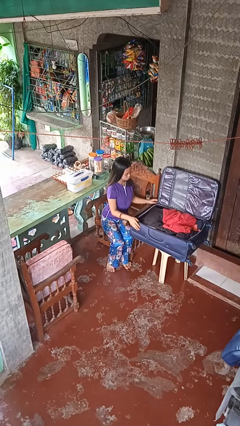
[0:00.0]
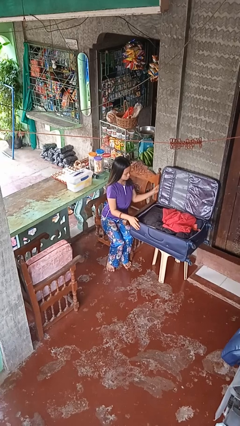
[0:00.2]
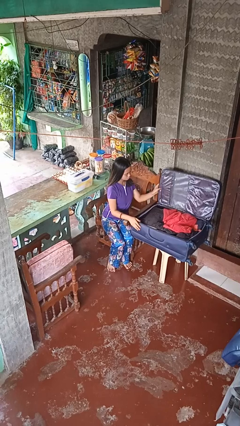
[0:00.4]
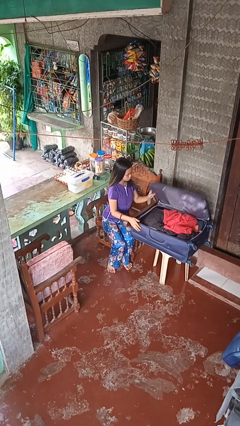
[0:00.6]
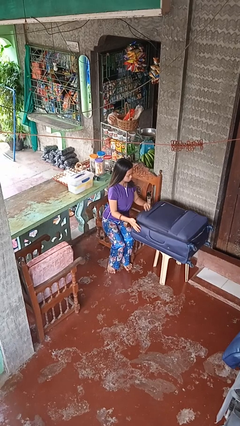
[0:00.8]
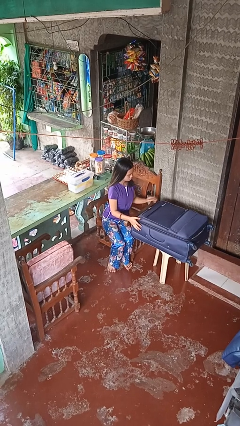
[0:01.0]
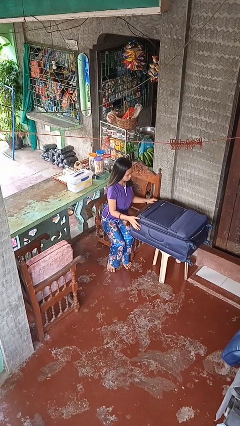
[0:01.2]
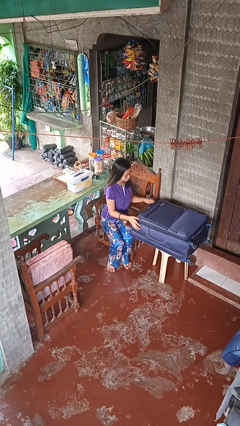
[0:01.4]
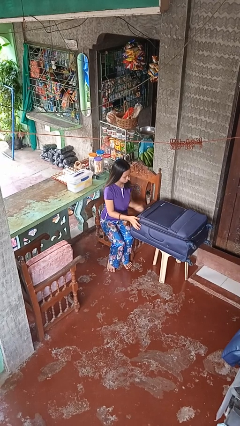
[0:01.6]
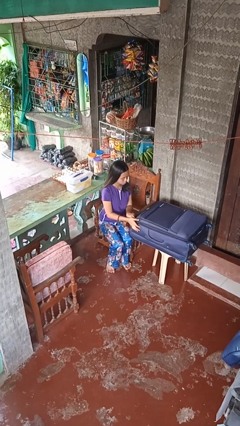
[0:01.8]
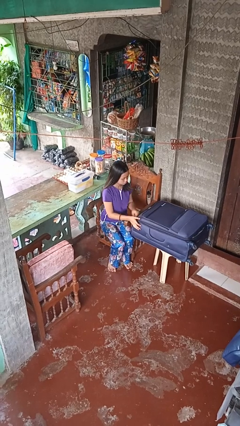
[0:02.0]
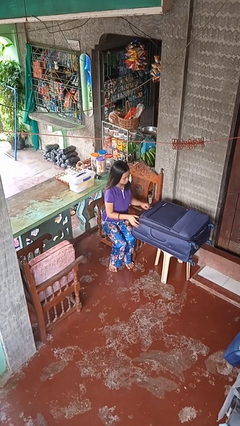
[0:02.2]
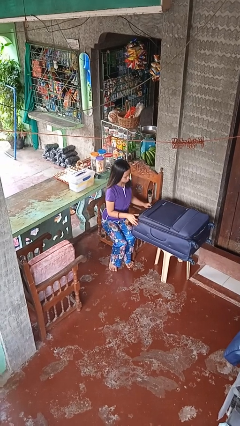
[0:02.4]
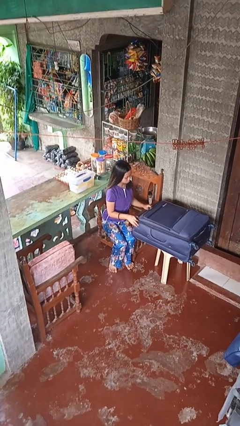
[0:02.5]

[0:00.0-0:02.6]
person closes suitcase

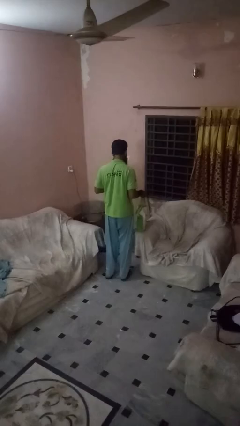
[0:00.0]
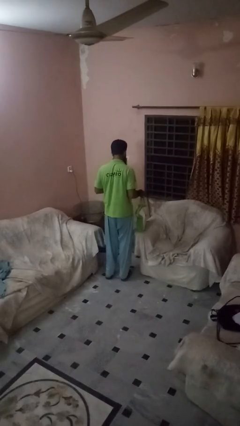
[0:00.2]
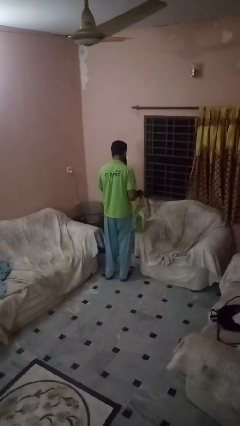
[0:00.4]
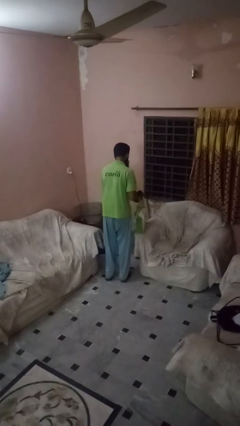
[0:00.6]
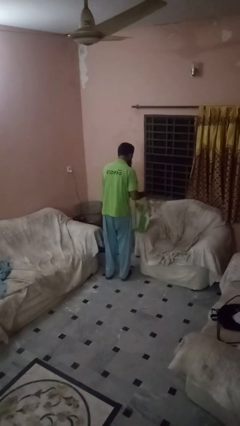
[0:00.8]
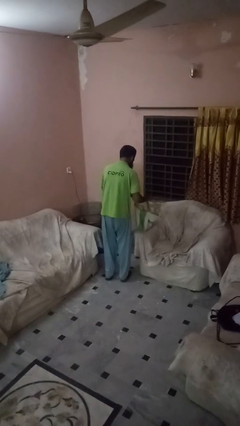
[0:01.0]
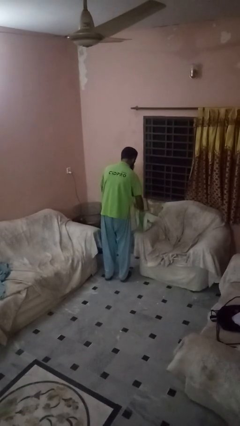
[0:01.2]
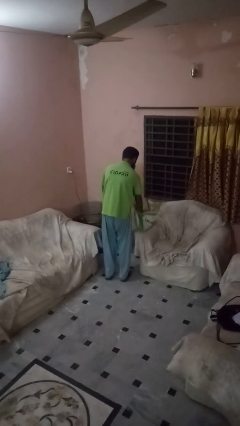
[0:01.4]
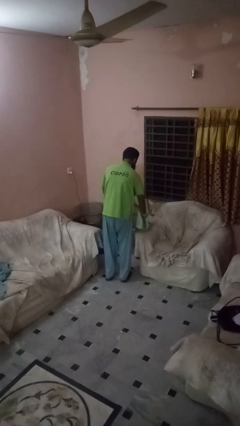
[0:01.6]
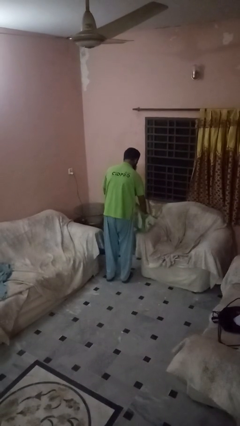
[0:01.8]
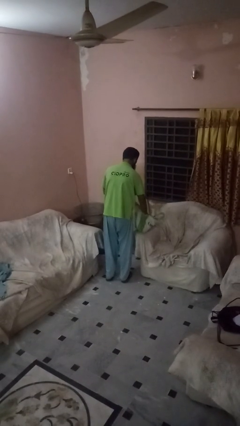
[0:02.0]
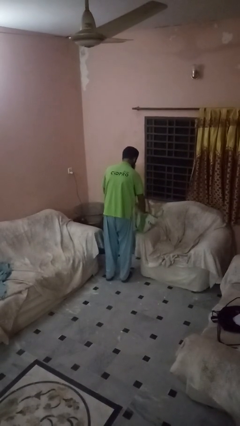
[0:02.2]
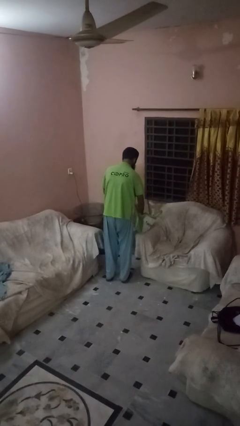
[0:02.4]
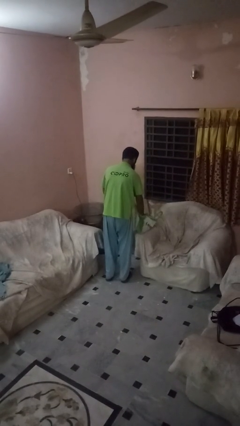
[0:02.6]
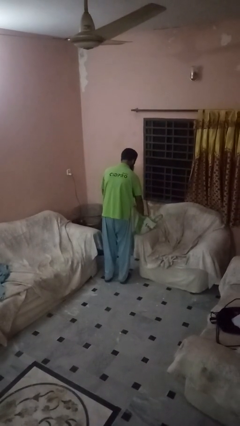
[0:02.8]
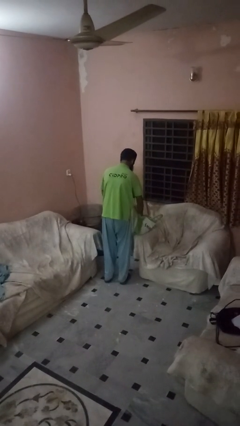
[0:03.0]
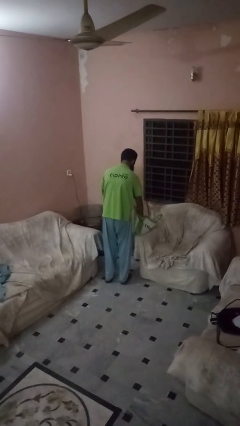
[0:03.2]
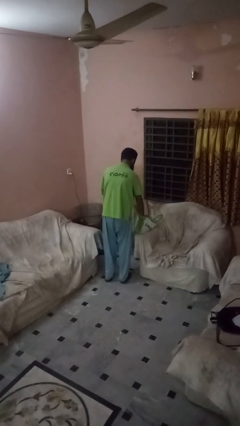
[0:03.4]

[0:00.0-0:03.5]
person searches in bag

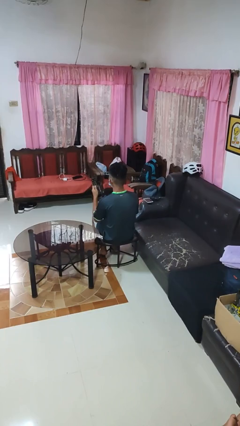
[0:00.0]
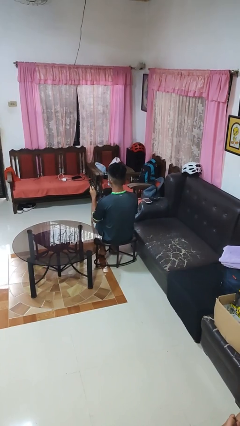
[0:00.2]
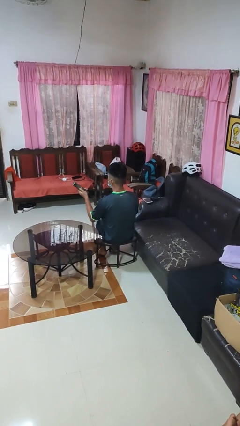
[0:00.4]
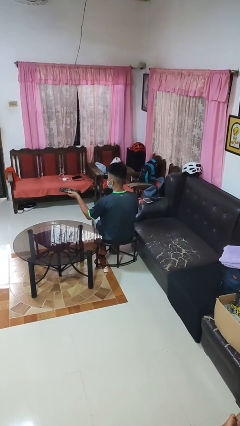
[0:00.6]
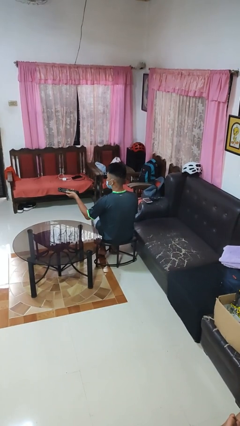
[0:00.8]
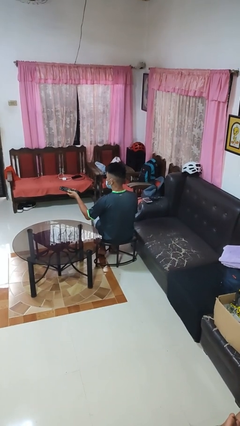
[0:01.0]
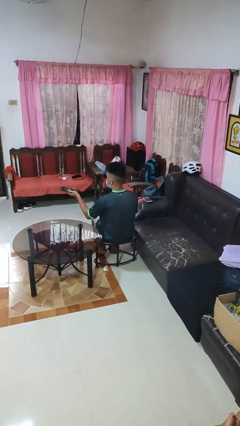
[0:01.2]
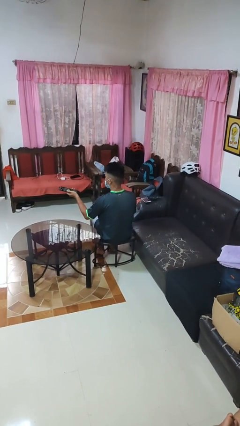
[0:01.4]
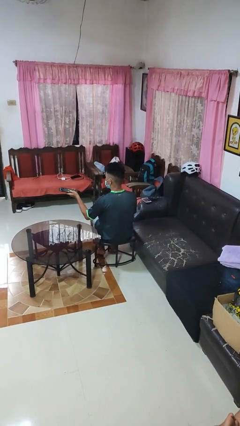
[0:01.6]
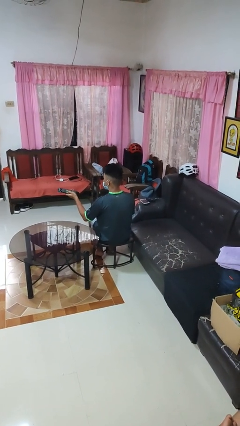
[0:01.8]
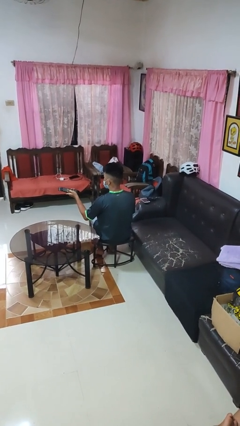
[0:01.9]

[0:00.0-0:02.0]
person uses television remote

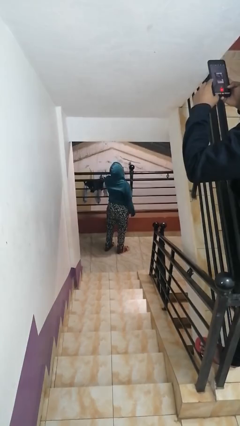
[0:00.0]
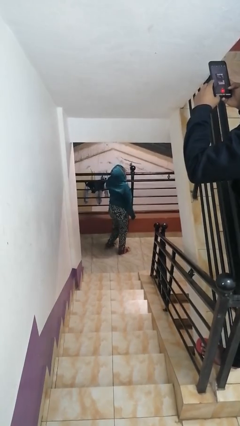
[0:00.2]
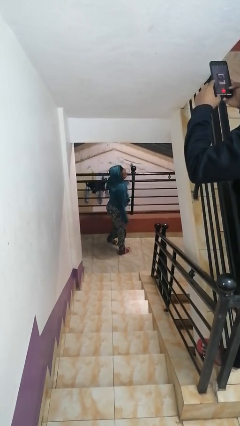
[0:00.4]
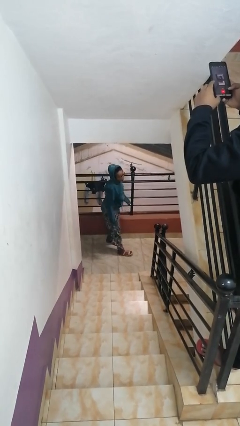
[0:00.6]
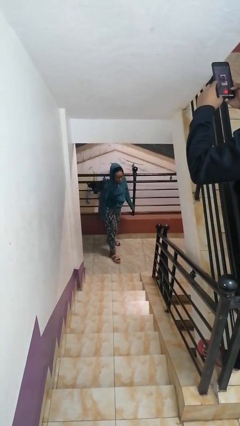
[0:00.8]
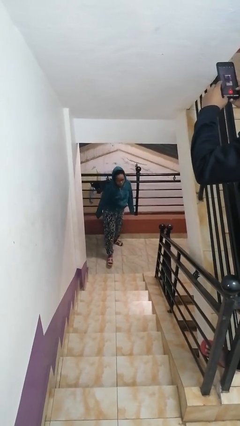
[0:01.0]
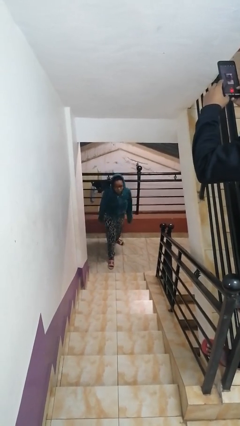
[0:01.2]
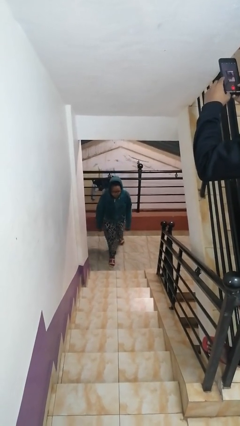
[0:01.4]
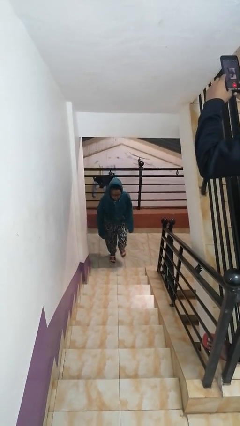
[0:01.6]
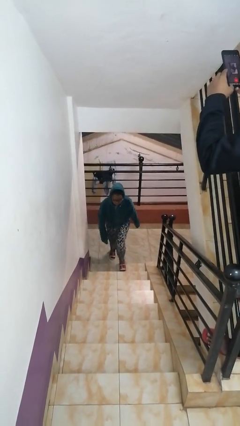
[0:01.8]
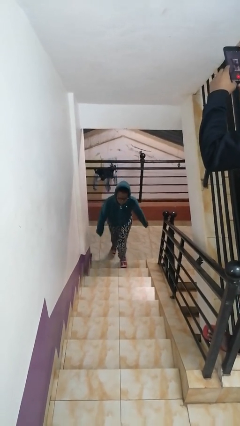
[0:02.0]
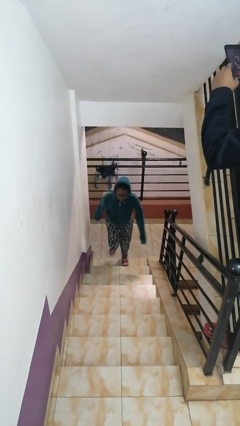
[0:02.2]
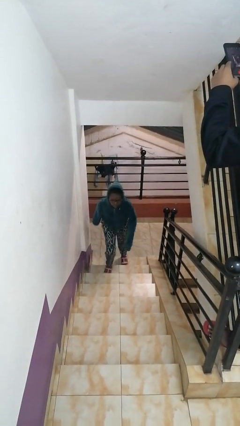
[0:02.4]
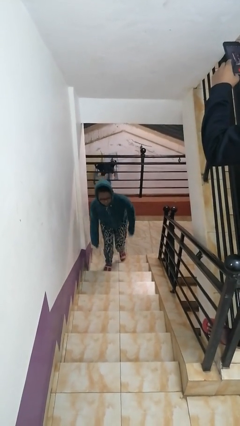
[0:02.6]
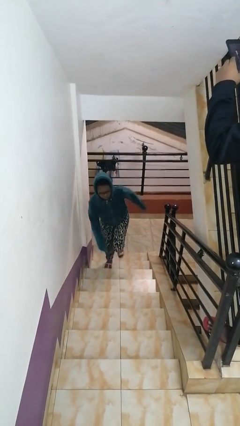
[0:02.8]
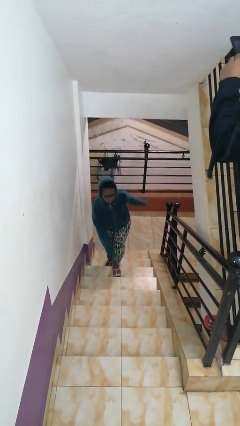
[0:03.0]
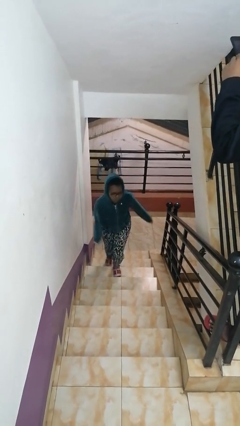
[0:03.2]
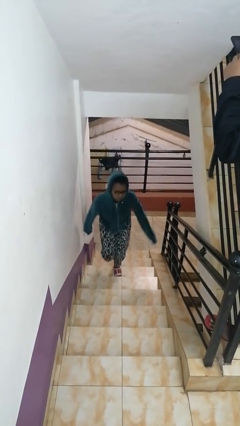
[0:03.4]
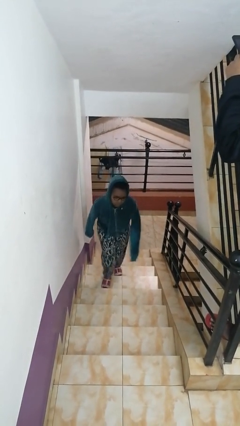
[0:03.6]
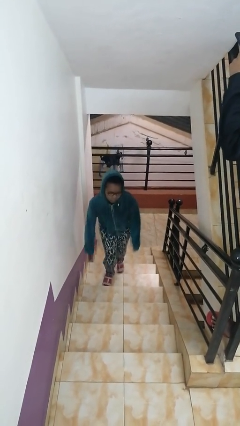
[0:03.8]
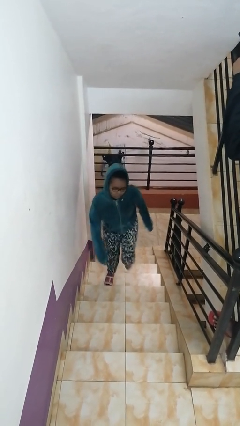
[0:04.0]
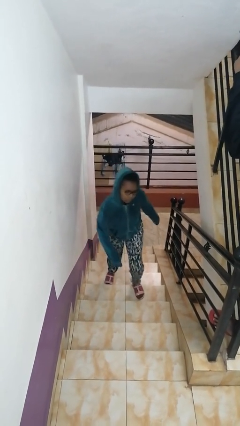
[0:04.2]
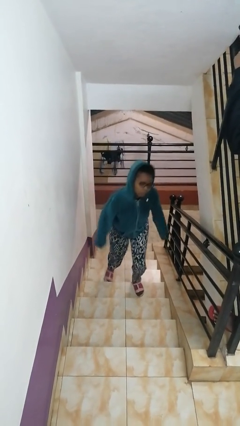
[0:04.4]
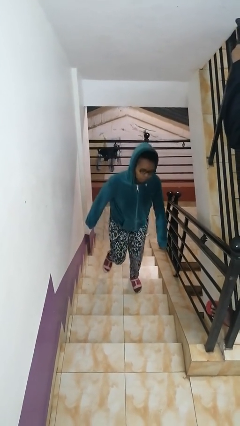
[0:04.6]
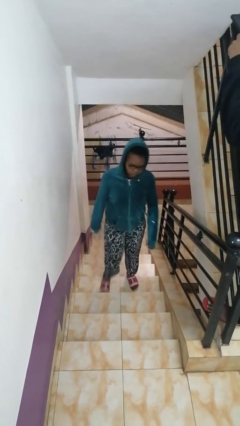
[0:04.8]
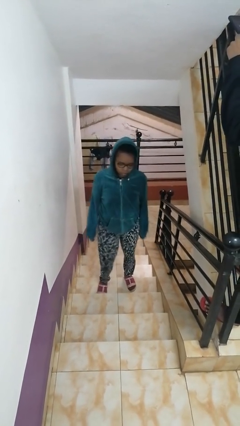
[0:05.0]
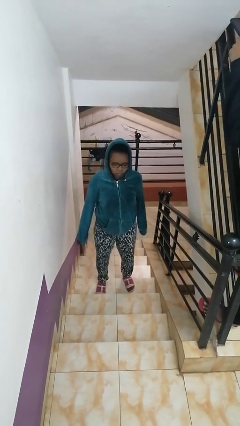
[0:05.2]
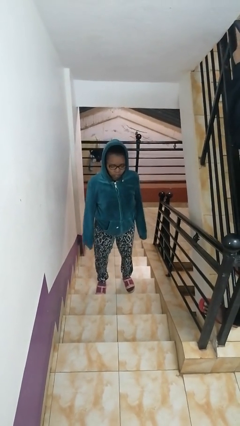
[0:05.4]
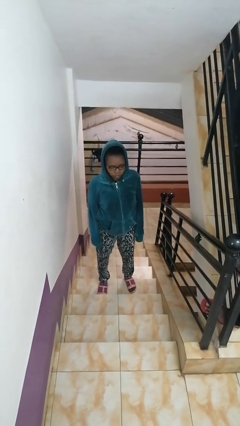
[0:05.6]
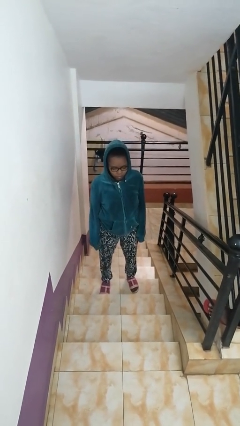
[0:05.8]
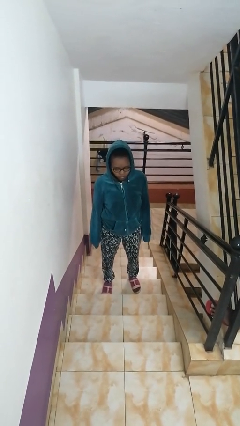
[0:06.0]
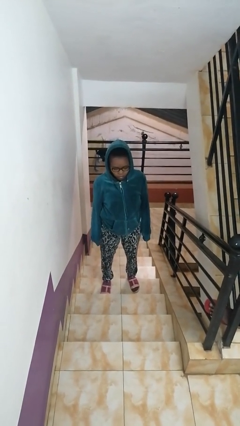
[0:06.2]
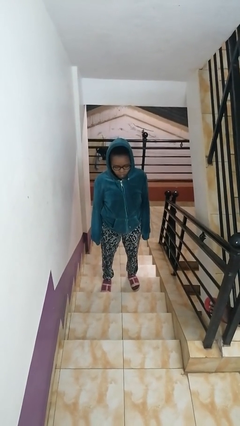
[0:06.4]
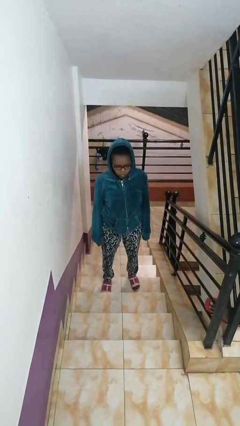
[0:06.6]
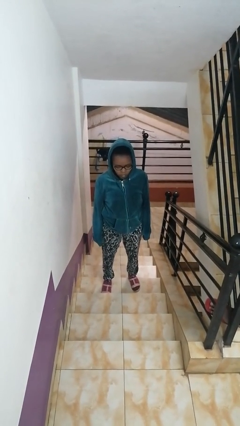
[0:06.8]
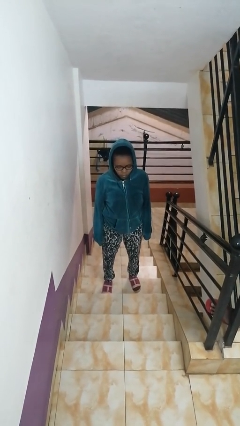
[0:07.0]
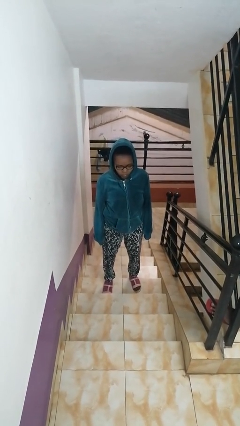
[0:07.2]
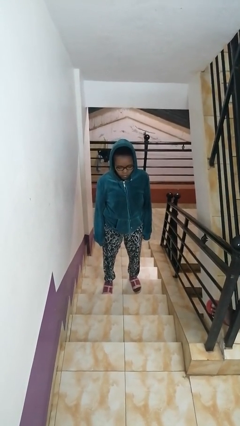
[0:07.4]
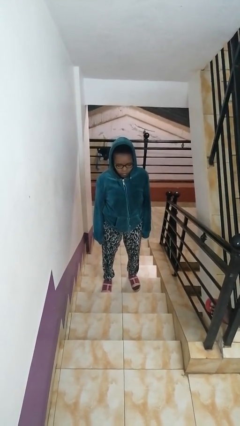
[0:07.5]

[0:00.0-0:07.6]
person climbs up stairs

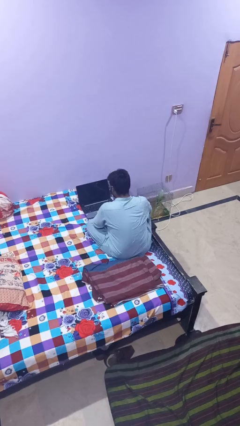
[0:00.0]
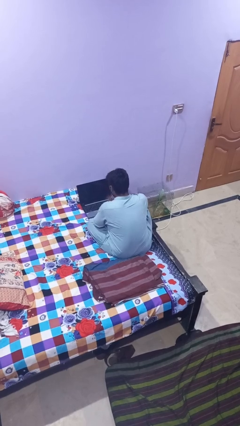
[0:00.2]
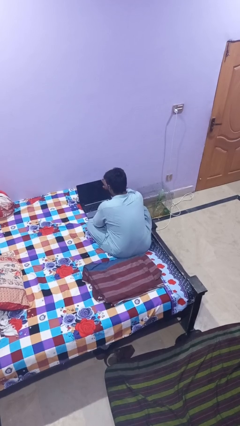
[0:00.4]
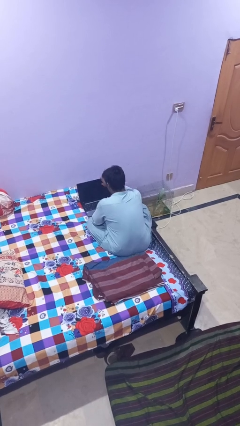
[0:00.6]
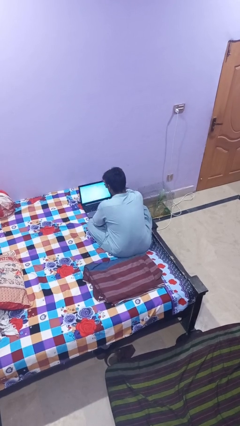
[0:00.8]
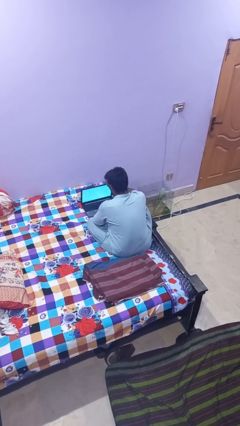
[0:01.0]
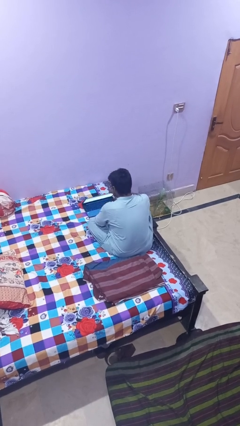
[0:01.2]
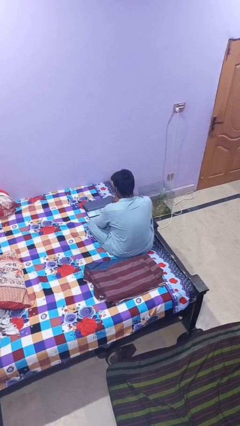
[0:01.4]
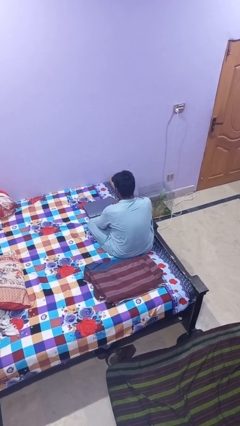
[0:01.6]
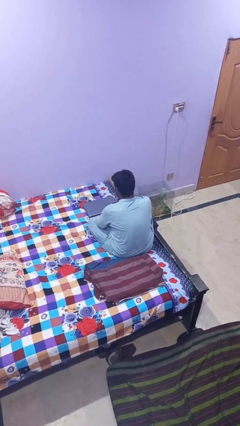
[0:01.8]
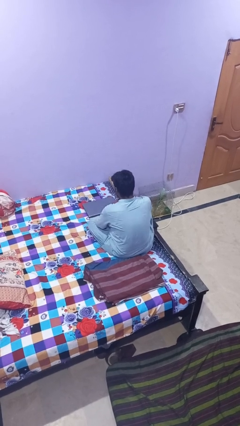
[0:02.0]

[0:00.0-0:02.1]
person closes laptop
